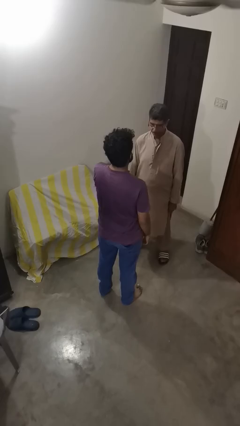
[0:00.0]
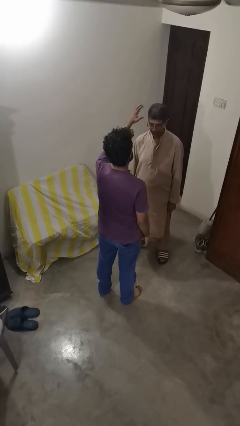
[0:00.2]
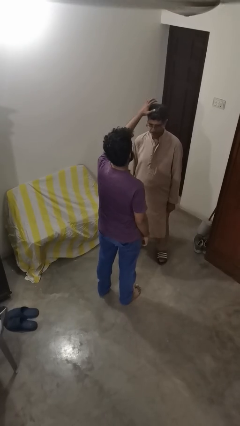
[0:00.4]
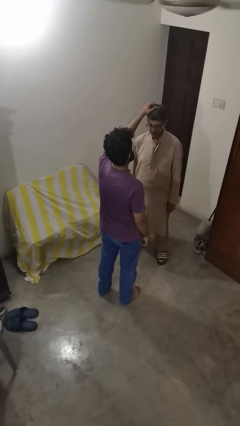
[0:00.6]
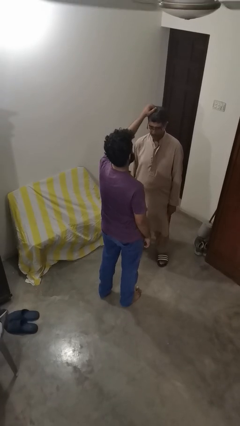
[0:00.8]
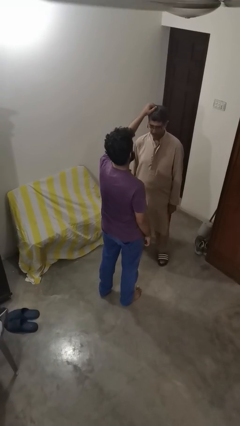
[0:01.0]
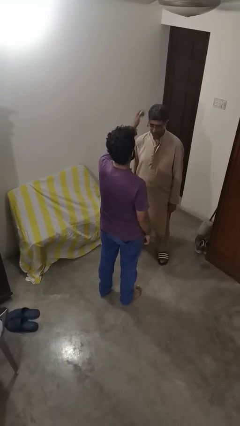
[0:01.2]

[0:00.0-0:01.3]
person grabs person by hair

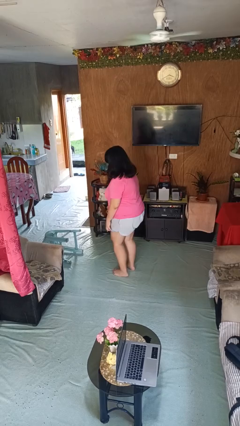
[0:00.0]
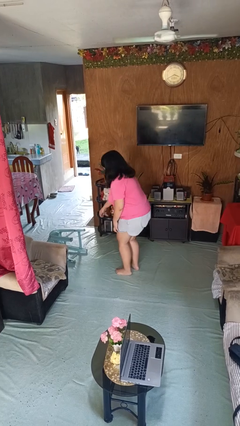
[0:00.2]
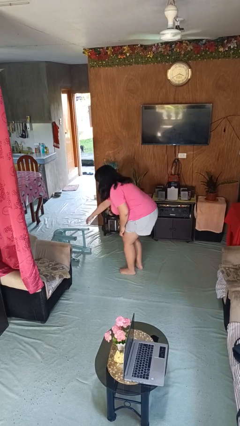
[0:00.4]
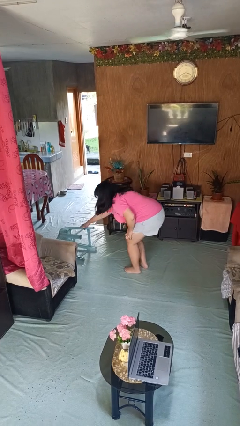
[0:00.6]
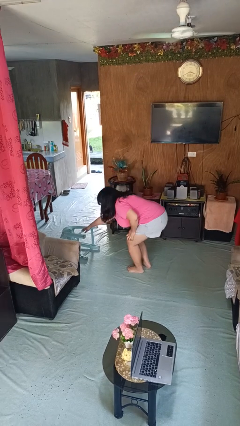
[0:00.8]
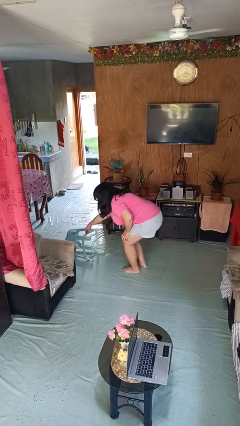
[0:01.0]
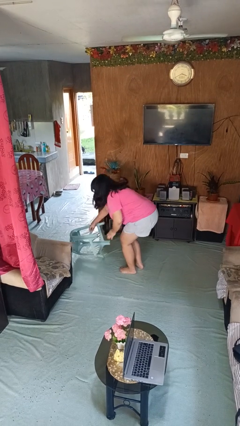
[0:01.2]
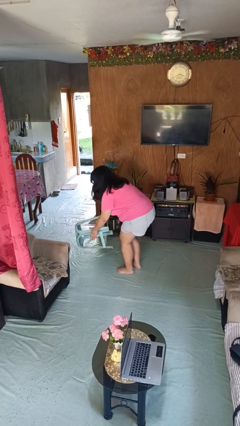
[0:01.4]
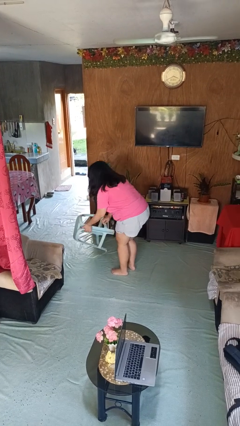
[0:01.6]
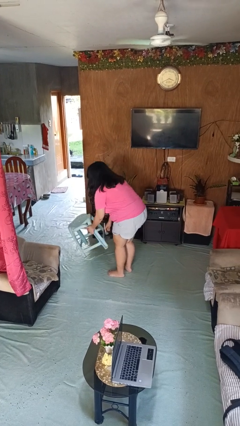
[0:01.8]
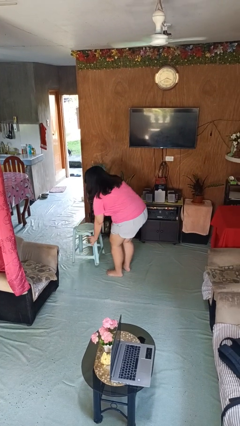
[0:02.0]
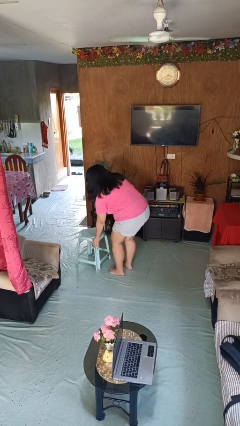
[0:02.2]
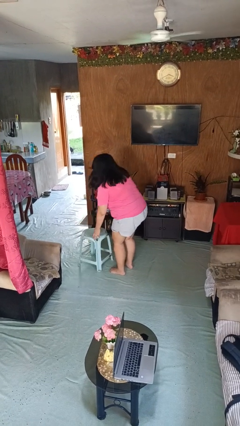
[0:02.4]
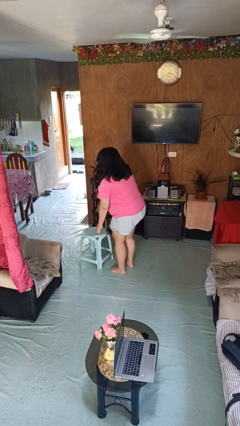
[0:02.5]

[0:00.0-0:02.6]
person sets upright furniture

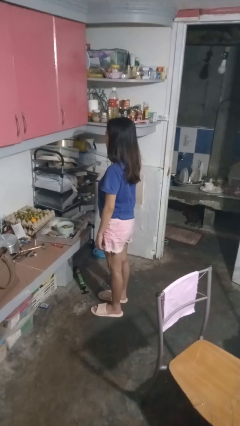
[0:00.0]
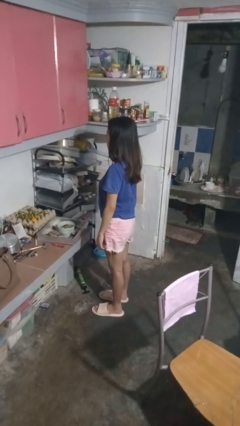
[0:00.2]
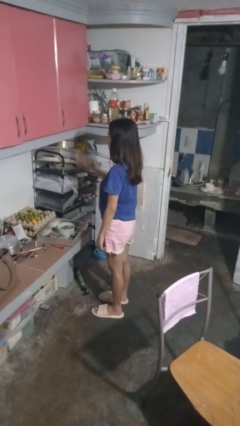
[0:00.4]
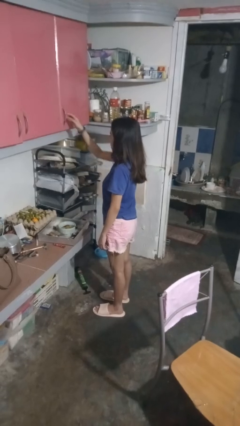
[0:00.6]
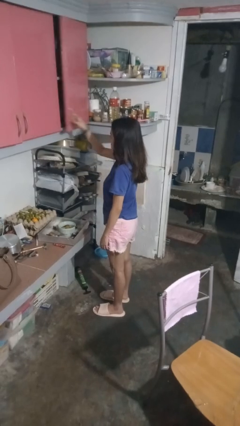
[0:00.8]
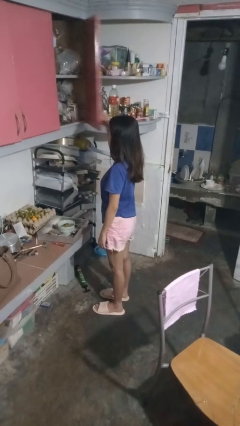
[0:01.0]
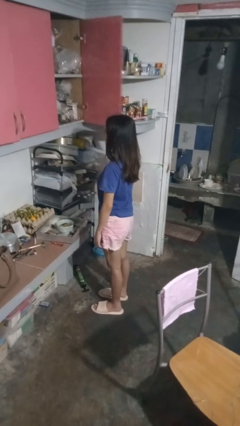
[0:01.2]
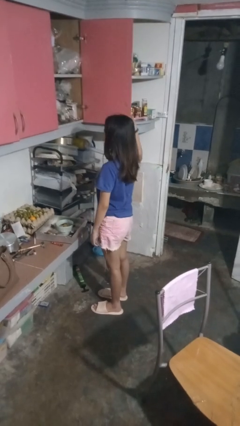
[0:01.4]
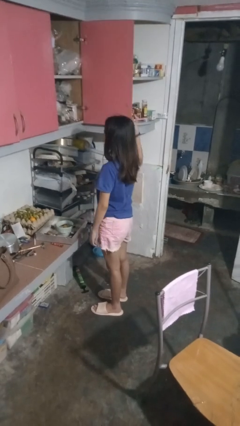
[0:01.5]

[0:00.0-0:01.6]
person opens cabinet

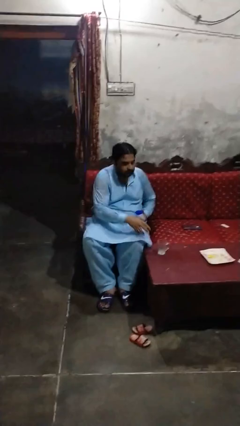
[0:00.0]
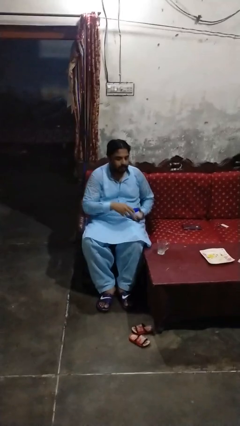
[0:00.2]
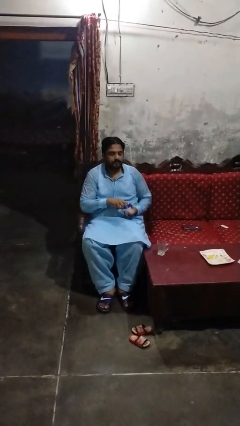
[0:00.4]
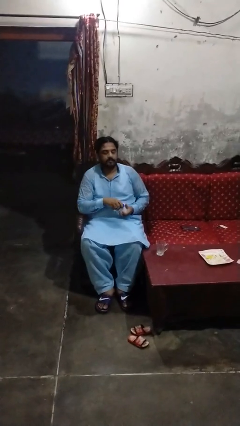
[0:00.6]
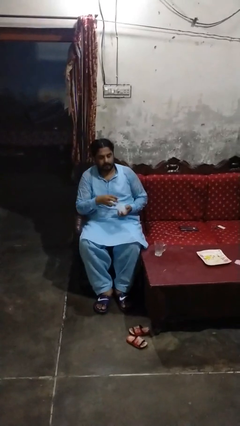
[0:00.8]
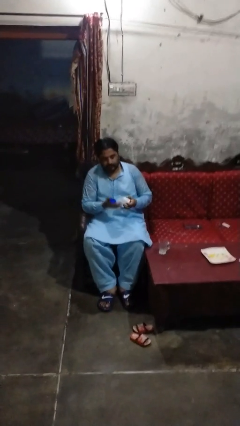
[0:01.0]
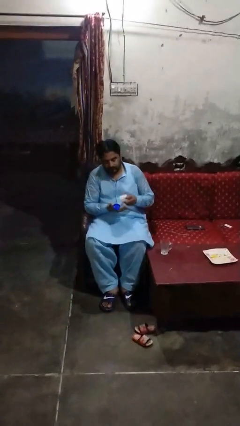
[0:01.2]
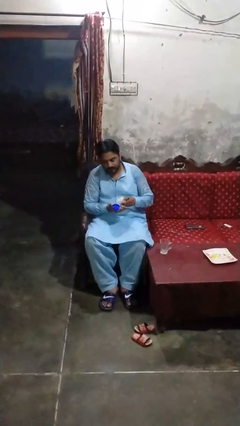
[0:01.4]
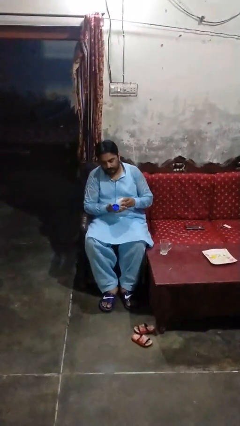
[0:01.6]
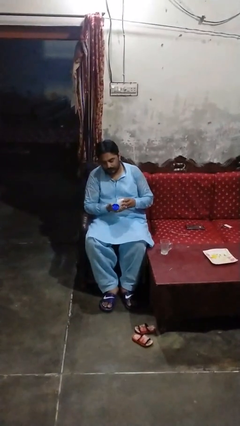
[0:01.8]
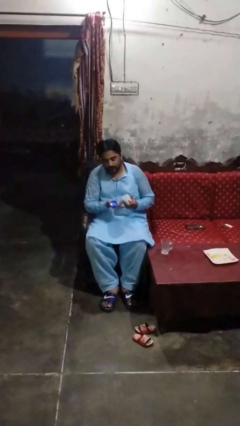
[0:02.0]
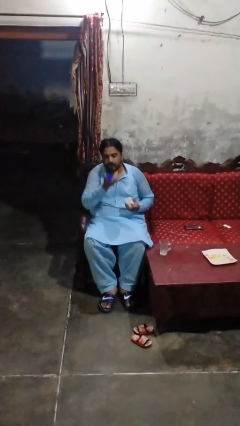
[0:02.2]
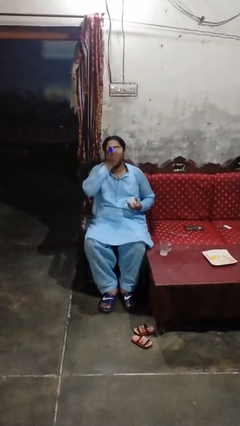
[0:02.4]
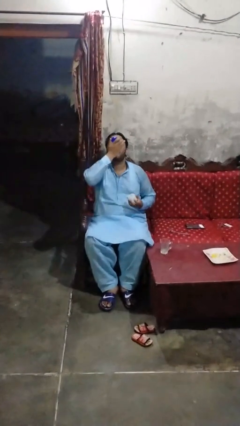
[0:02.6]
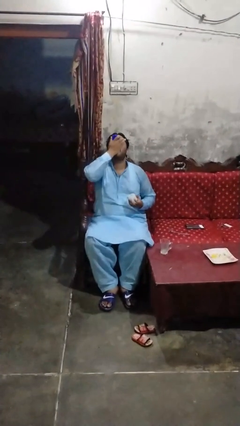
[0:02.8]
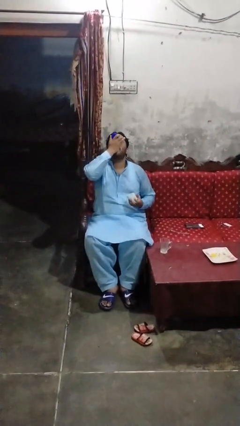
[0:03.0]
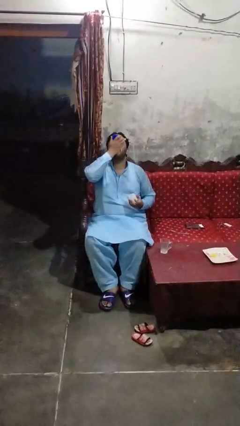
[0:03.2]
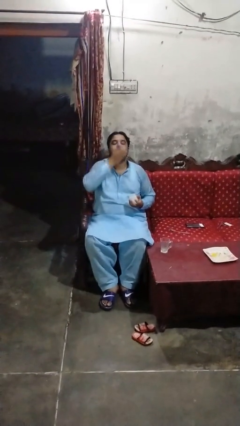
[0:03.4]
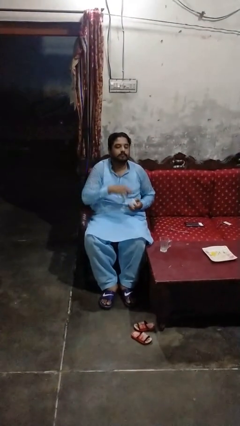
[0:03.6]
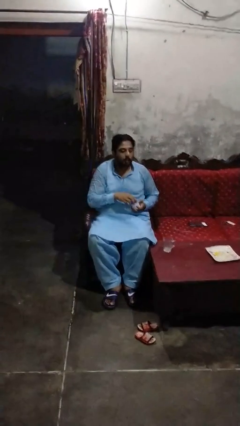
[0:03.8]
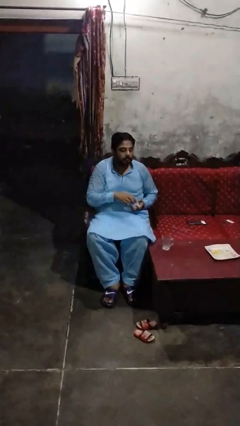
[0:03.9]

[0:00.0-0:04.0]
person takes medicine pills

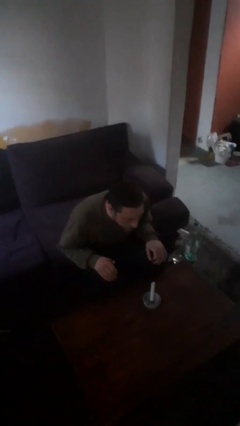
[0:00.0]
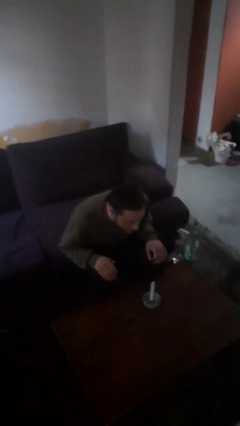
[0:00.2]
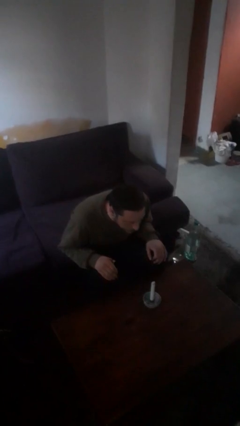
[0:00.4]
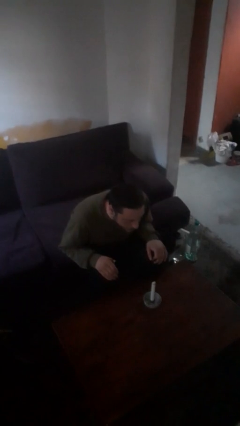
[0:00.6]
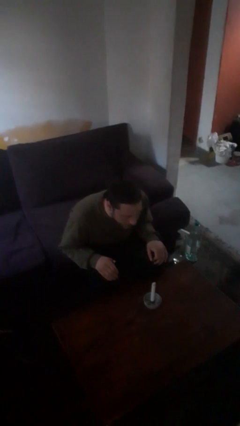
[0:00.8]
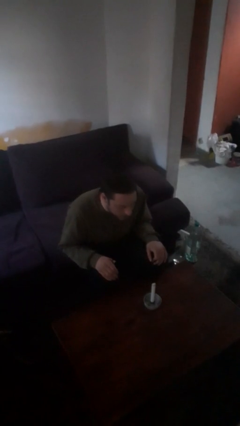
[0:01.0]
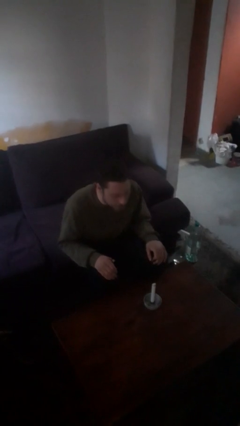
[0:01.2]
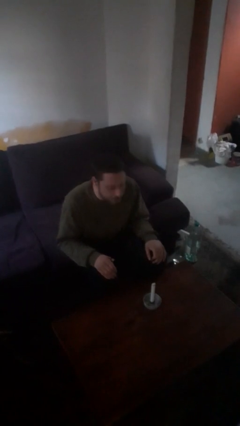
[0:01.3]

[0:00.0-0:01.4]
person extinguishes candle

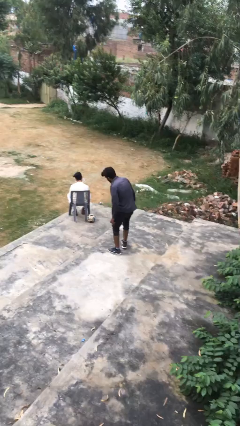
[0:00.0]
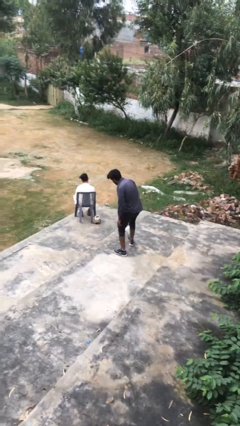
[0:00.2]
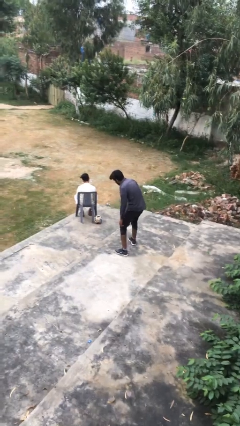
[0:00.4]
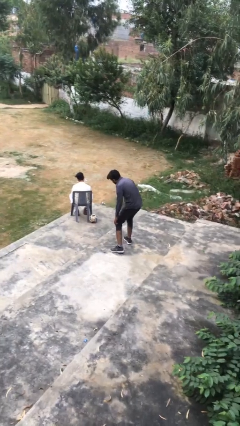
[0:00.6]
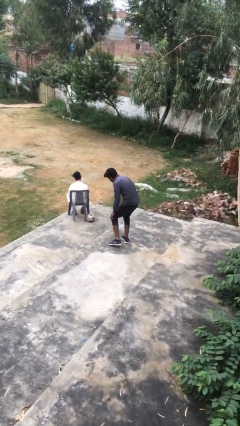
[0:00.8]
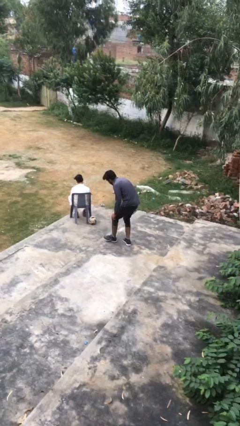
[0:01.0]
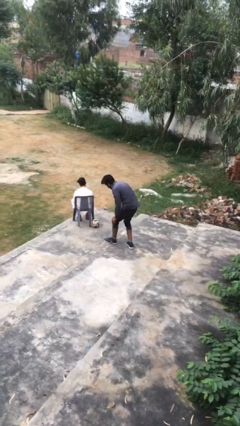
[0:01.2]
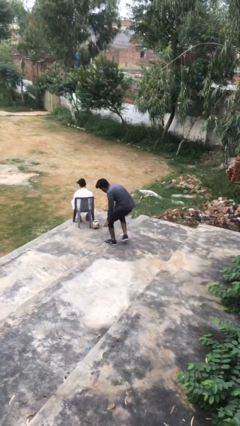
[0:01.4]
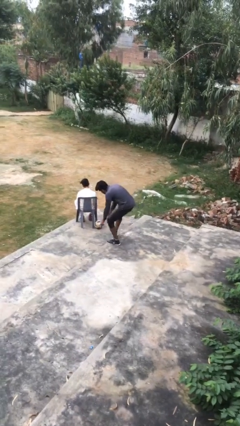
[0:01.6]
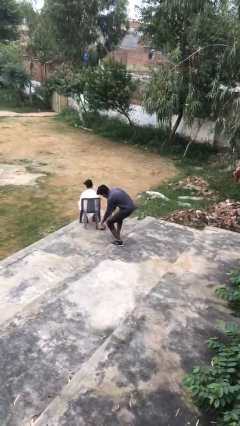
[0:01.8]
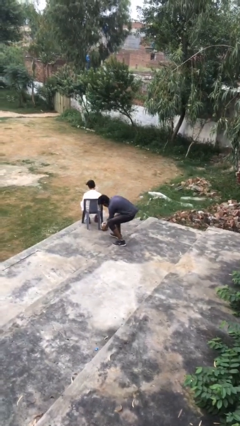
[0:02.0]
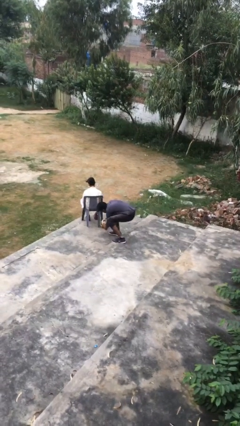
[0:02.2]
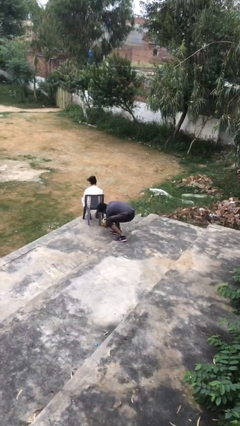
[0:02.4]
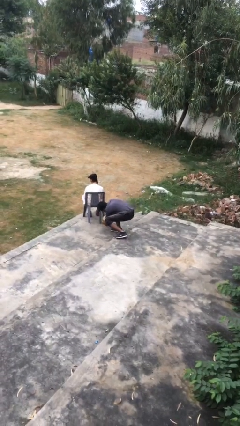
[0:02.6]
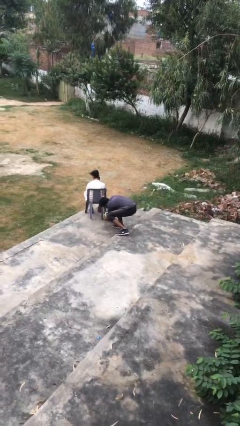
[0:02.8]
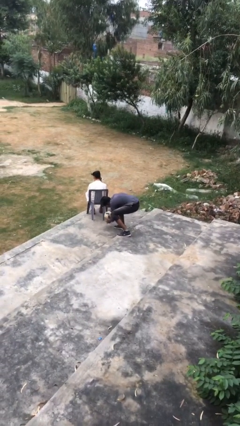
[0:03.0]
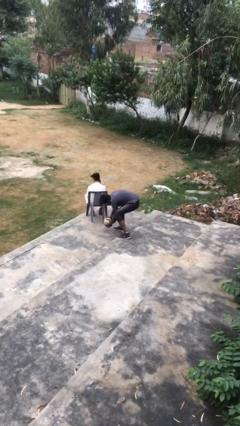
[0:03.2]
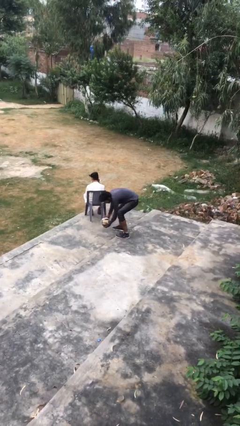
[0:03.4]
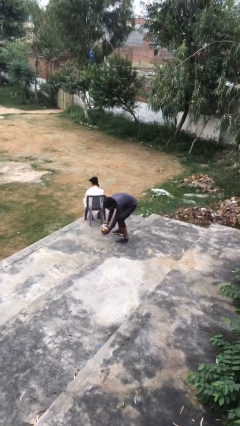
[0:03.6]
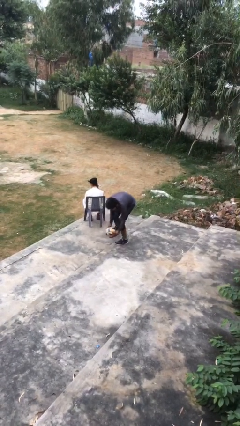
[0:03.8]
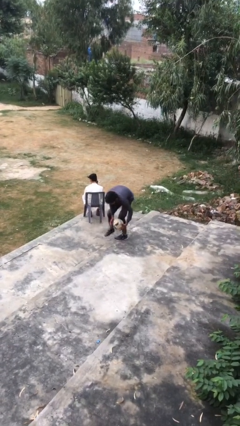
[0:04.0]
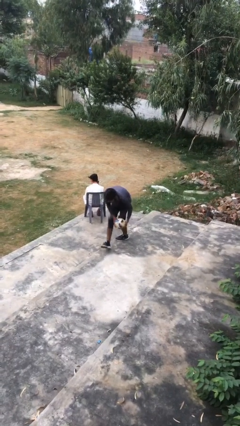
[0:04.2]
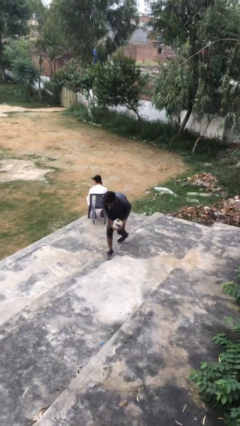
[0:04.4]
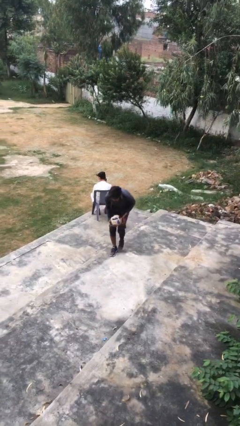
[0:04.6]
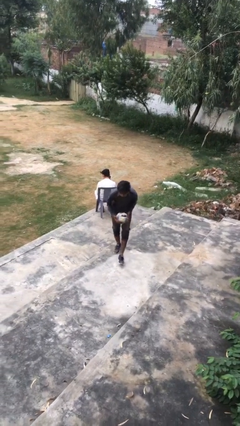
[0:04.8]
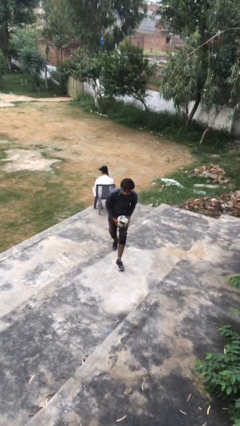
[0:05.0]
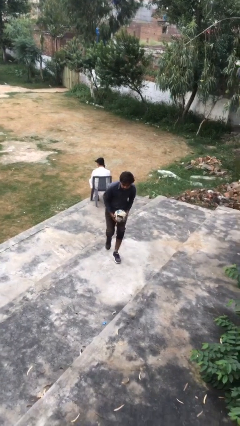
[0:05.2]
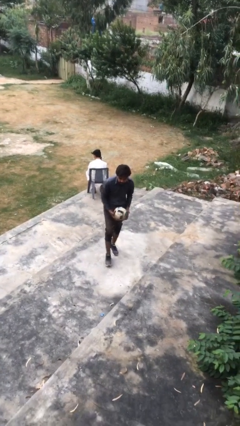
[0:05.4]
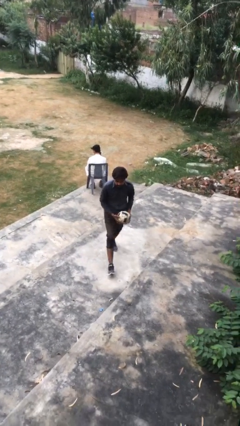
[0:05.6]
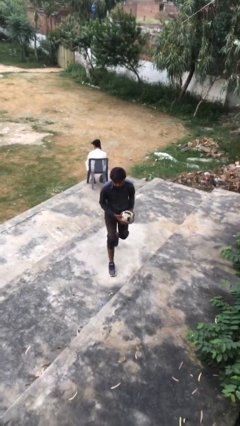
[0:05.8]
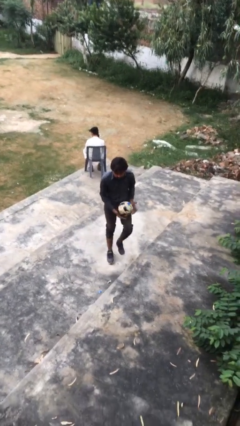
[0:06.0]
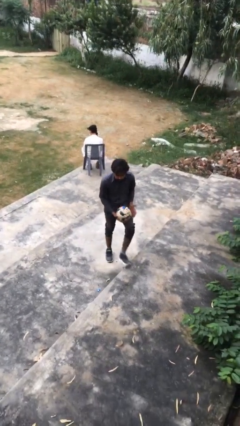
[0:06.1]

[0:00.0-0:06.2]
person steals object from person
